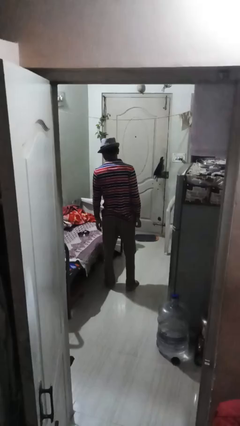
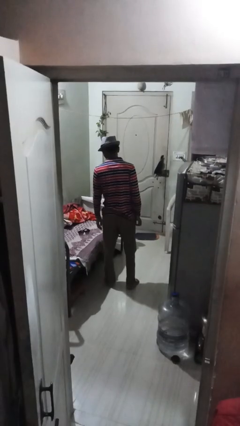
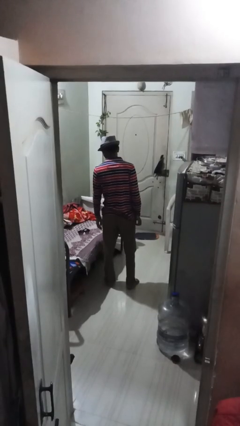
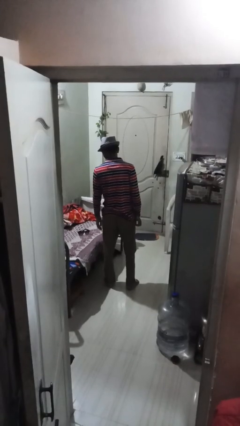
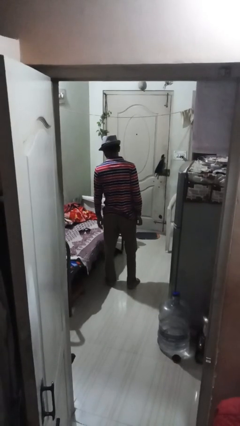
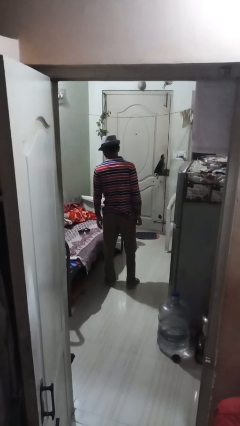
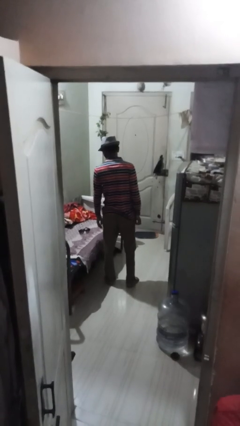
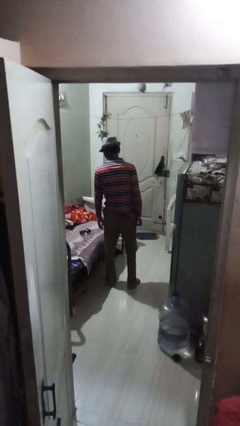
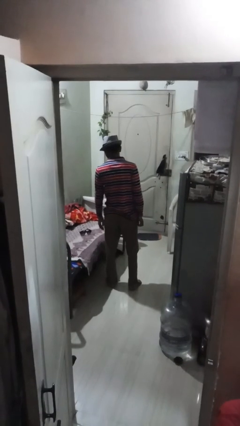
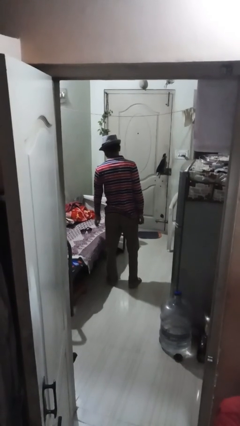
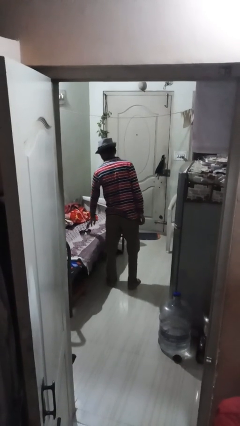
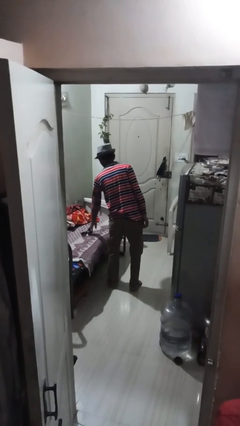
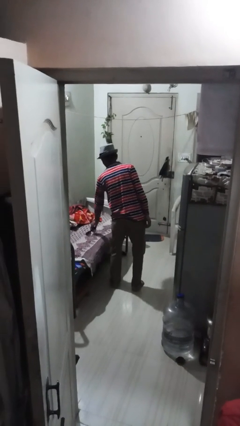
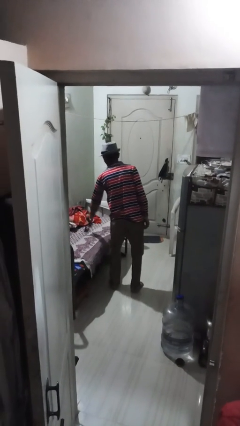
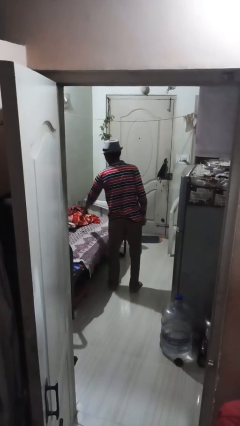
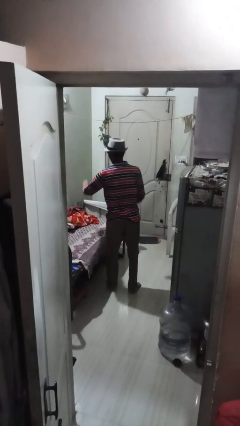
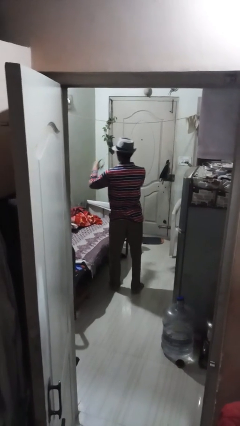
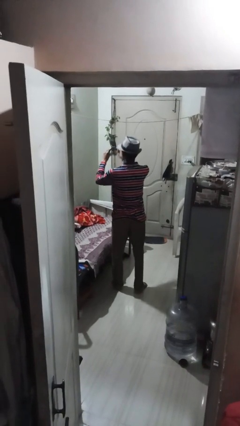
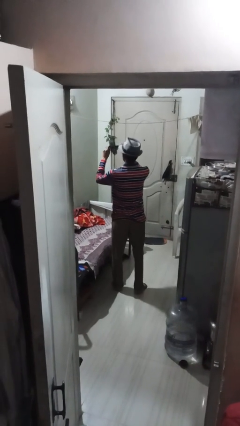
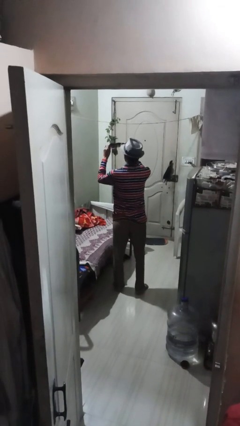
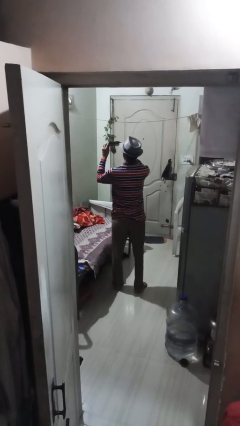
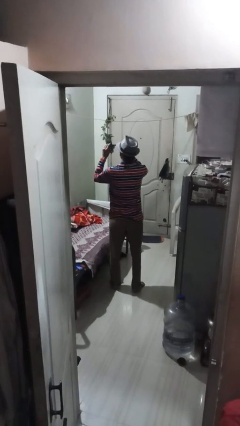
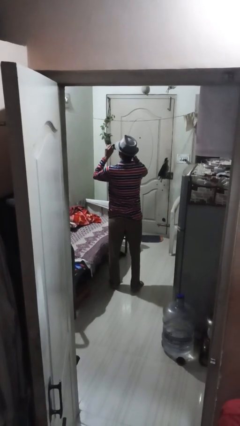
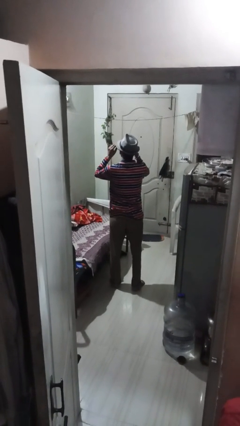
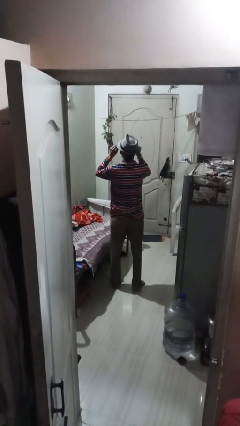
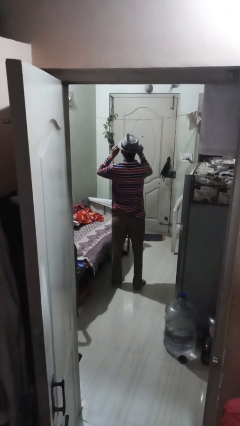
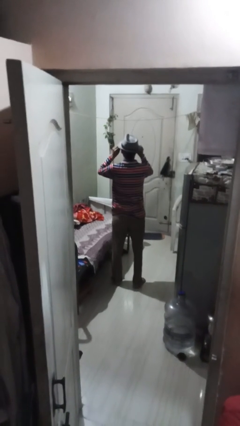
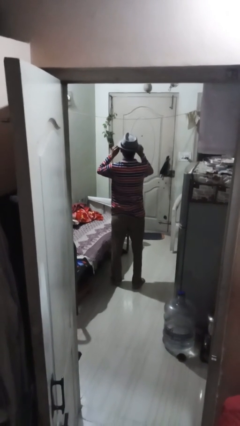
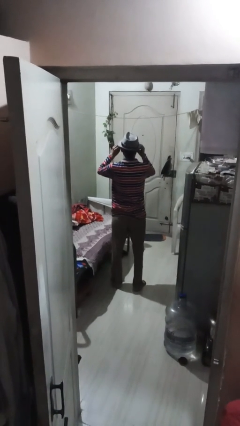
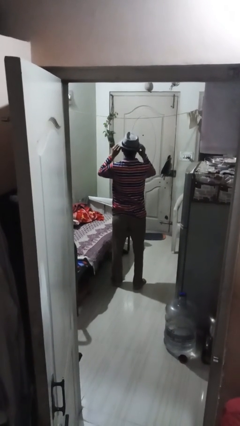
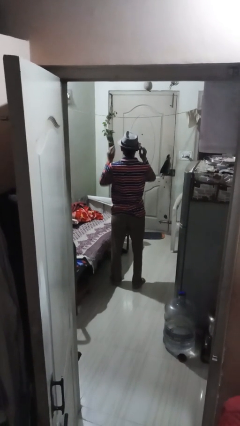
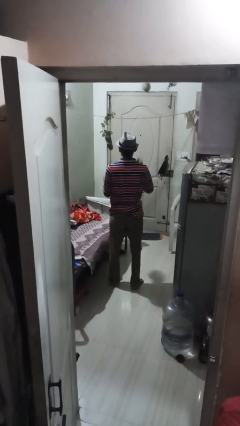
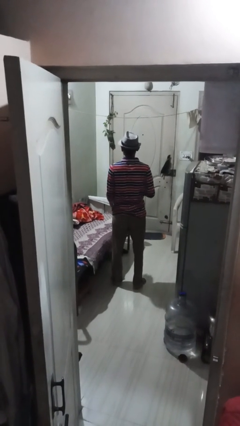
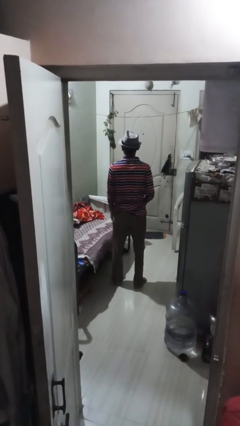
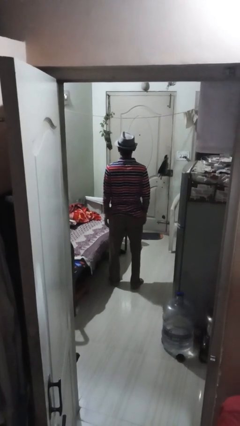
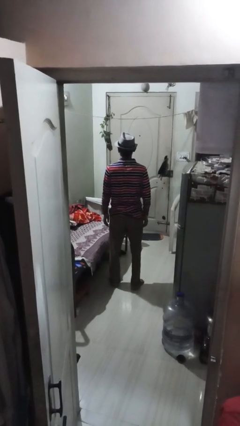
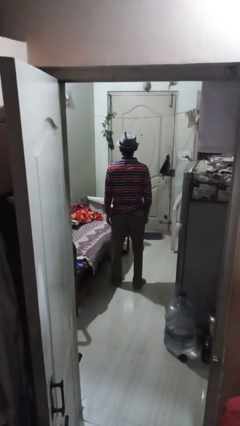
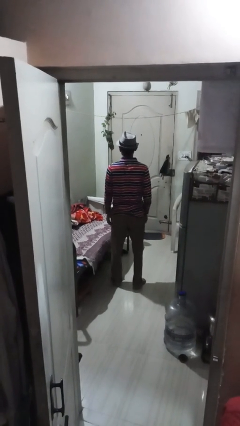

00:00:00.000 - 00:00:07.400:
person puts on sunglasses

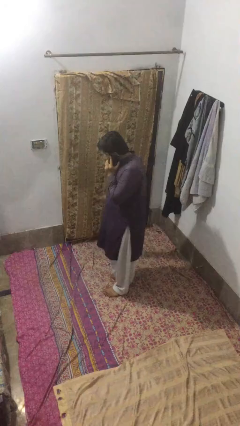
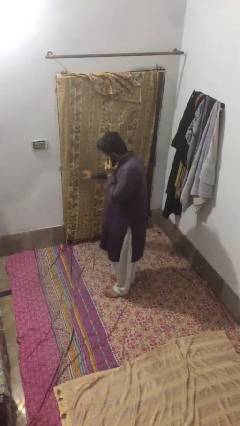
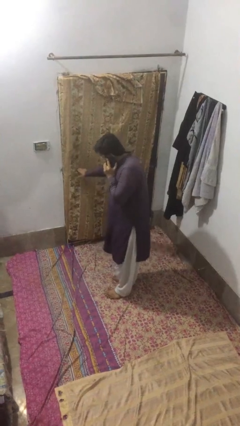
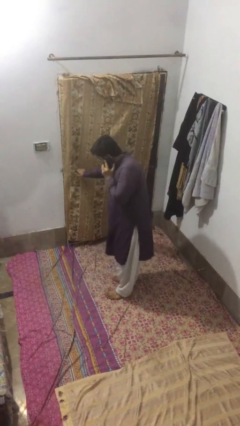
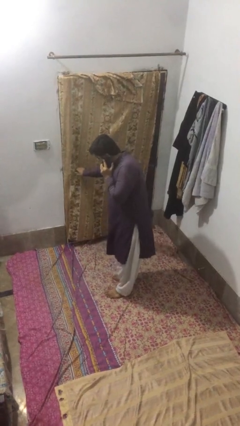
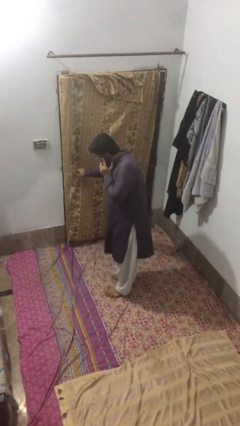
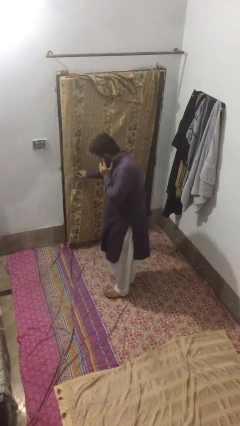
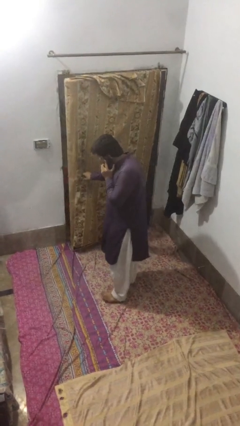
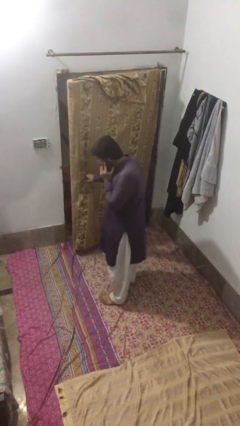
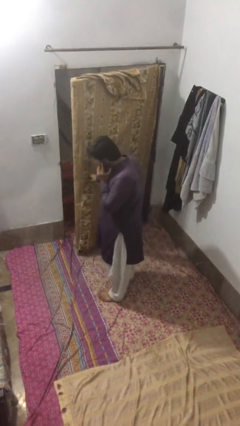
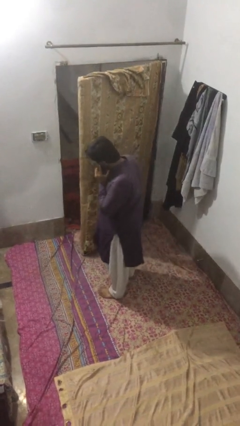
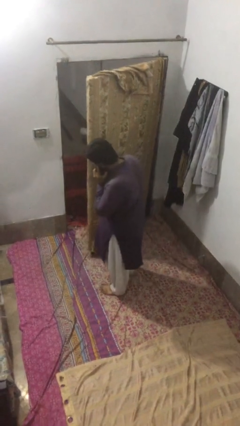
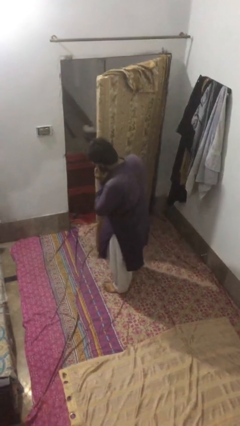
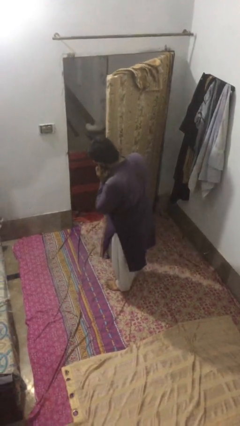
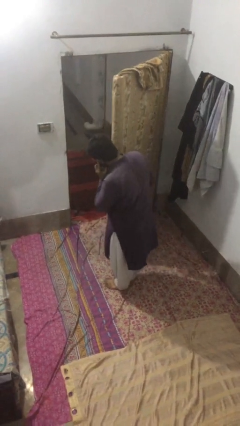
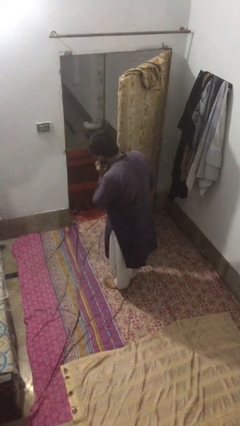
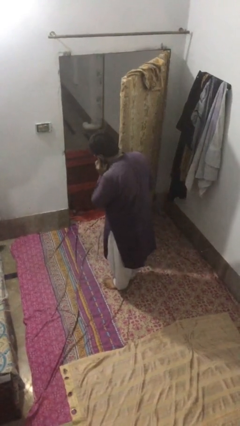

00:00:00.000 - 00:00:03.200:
person opens facility door

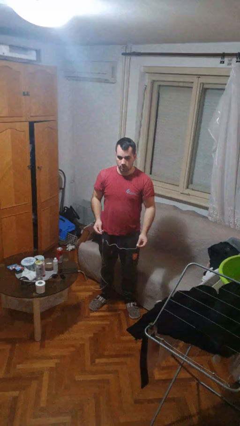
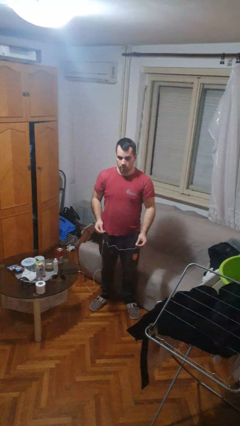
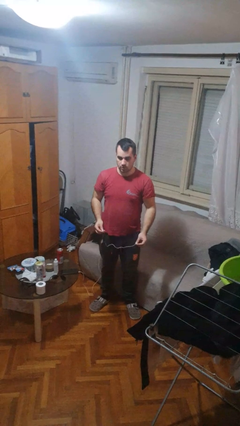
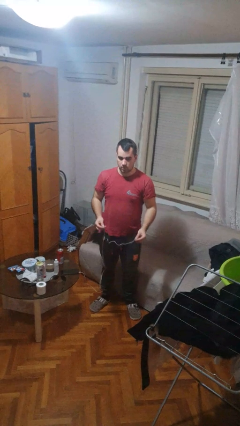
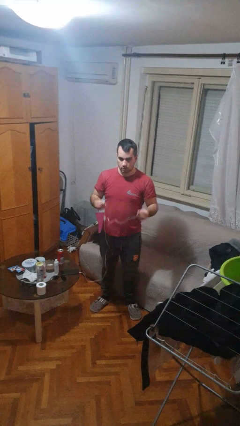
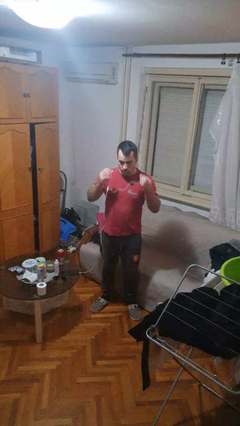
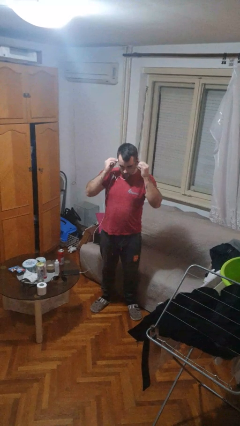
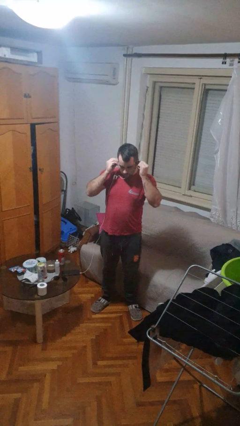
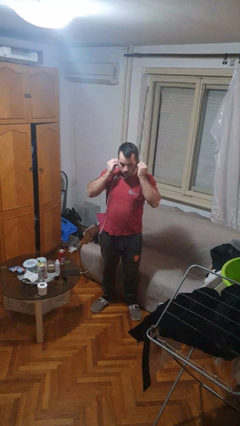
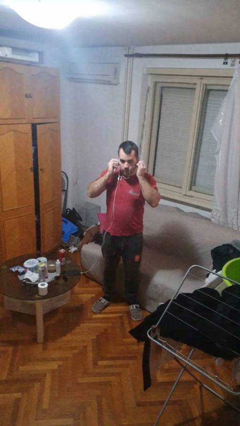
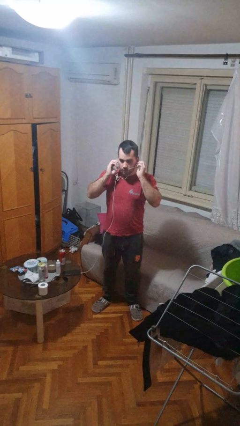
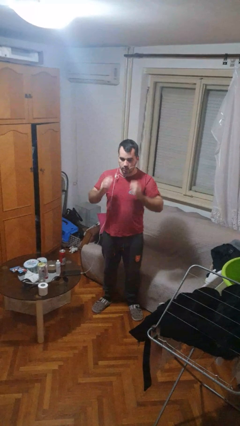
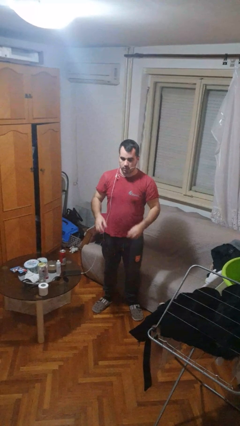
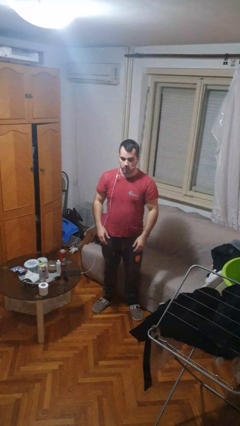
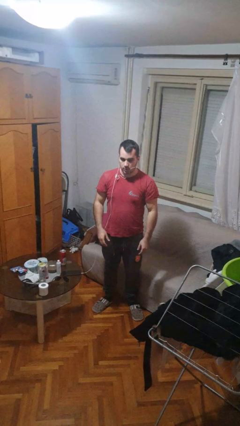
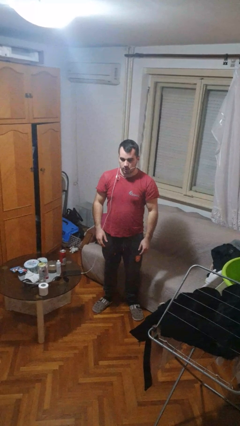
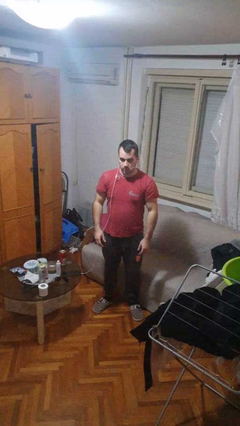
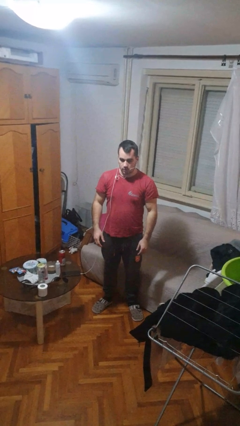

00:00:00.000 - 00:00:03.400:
person puts on headphones

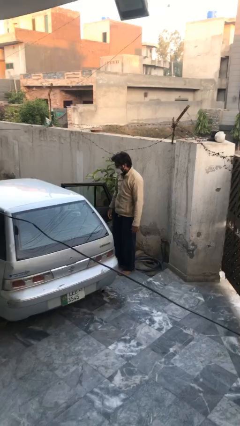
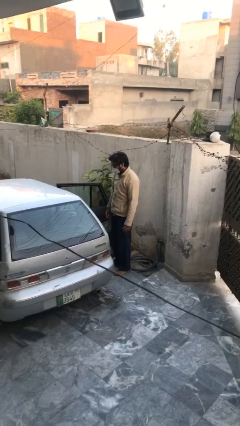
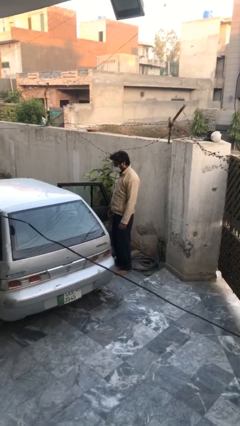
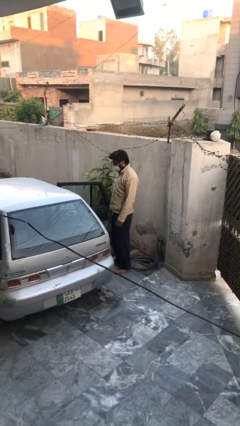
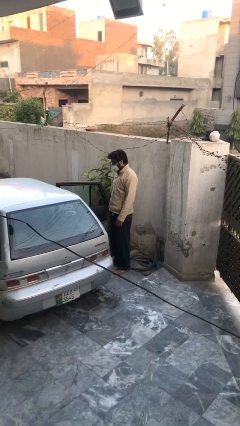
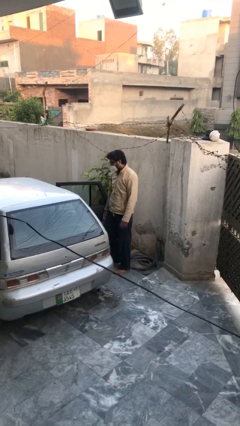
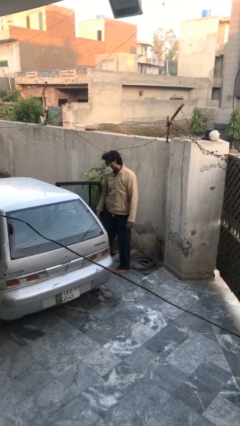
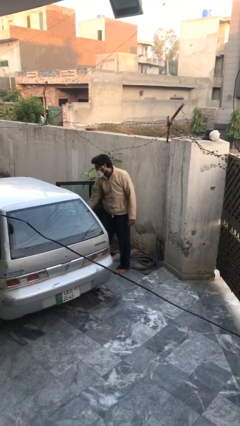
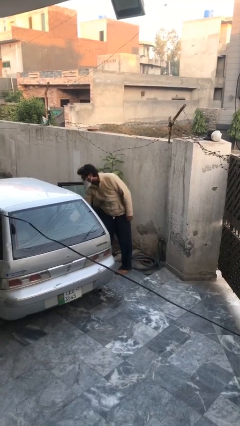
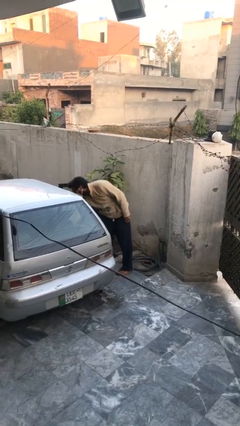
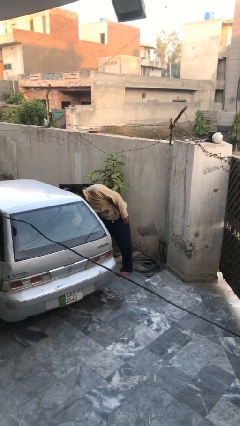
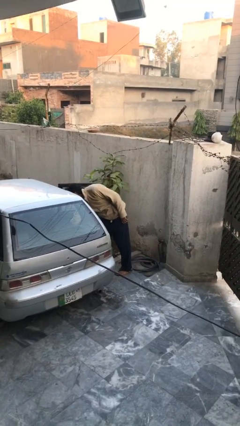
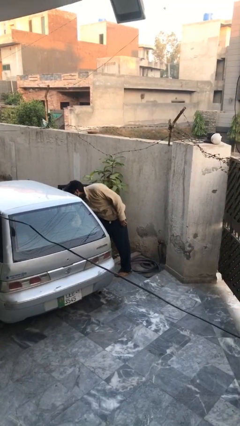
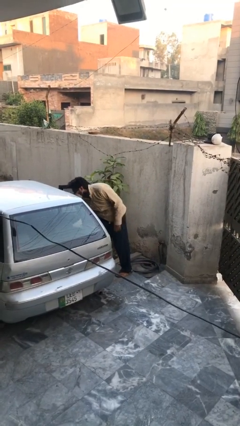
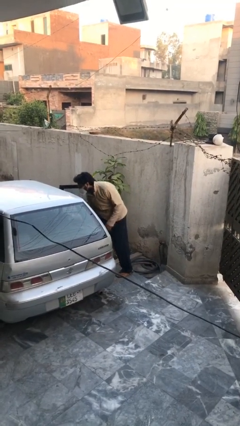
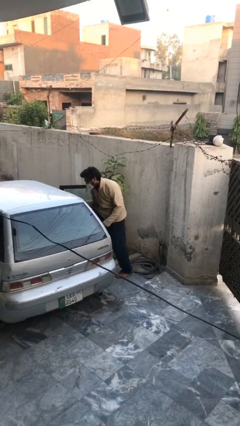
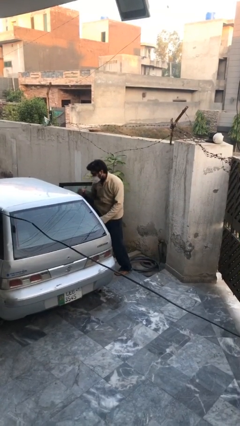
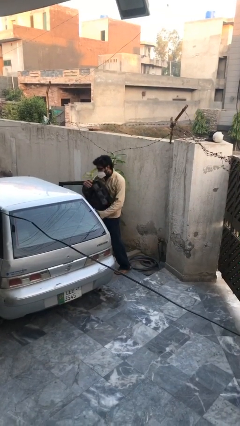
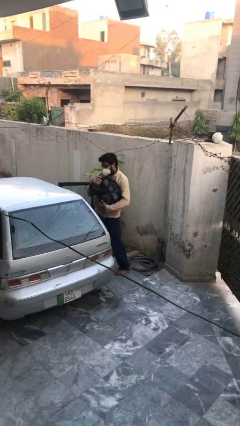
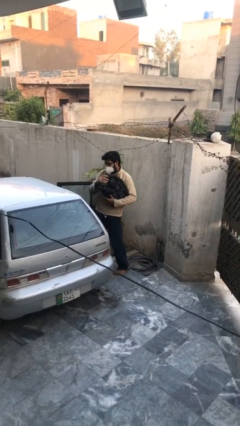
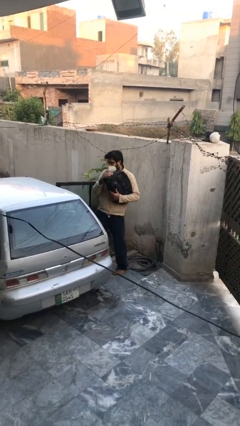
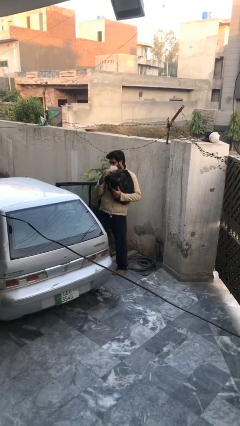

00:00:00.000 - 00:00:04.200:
person unloads car
